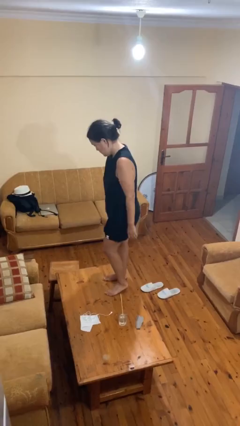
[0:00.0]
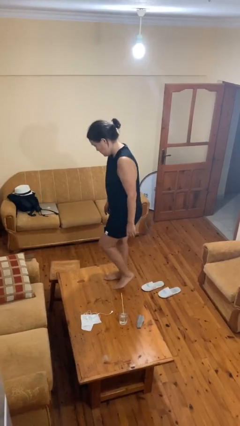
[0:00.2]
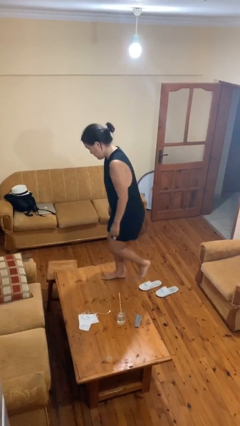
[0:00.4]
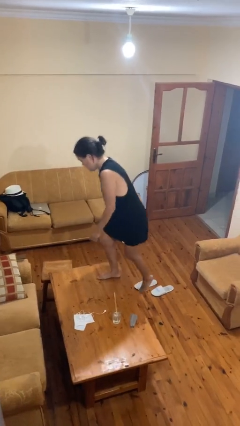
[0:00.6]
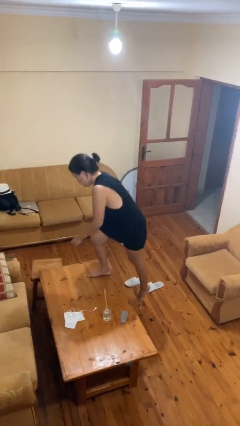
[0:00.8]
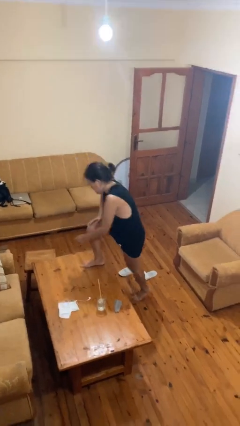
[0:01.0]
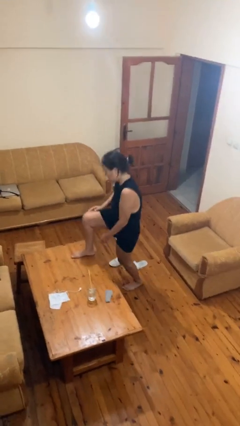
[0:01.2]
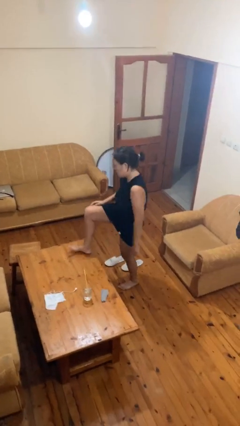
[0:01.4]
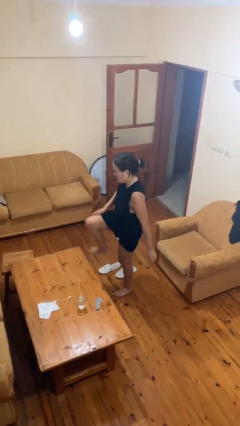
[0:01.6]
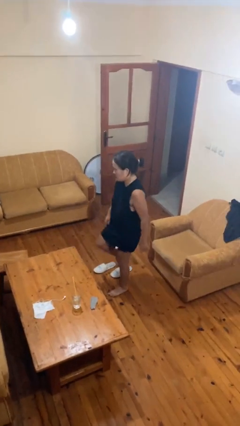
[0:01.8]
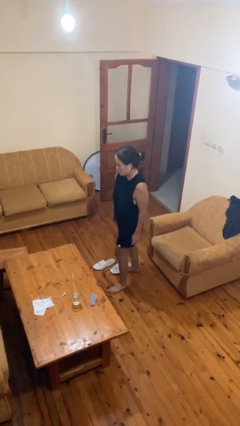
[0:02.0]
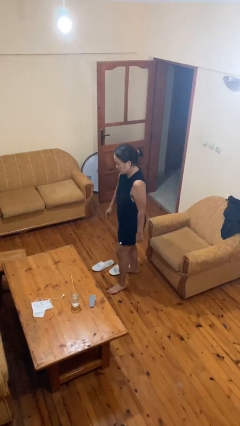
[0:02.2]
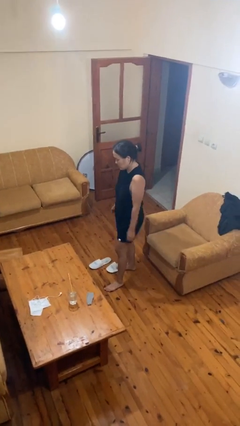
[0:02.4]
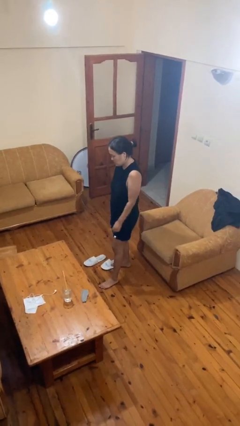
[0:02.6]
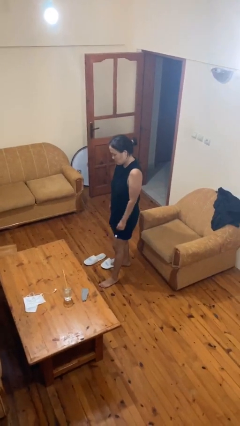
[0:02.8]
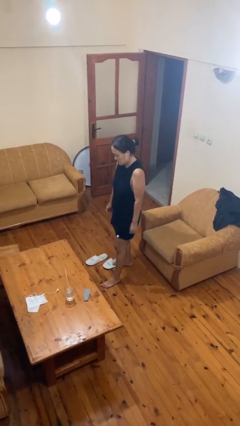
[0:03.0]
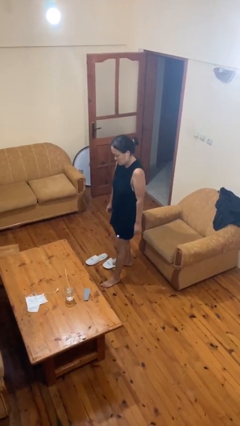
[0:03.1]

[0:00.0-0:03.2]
person climbs off table

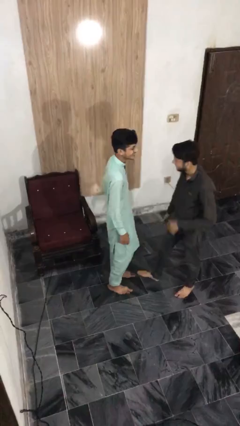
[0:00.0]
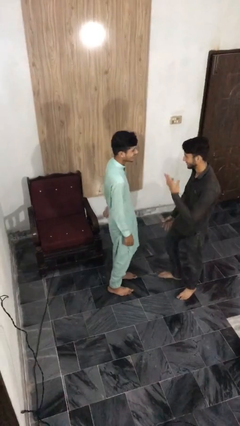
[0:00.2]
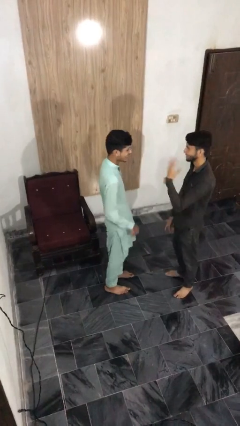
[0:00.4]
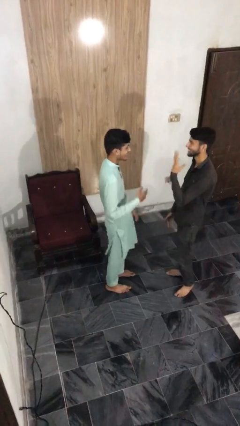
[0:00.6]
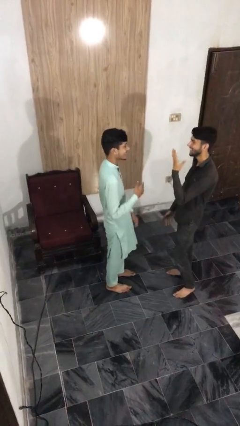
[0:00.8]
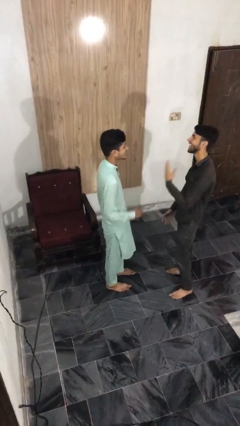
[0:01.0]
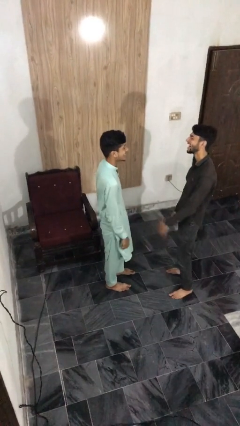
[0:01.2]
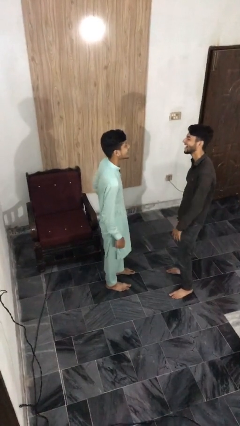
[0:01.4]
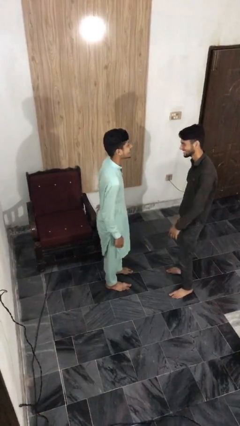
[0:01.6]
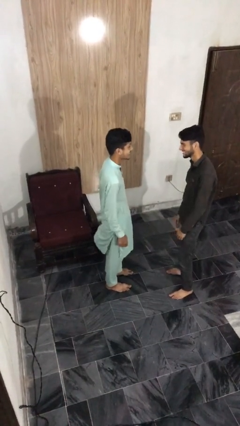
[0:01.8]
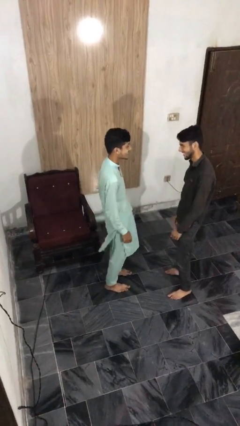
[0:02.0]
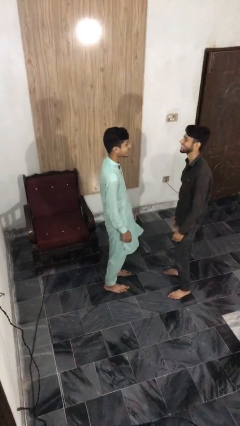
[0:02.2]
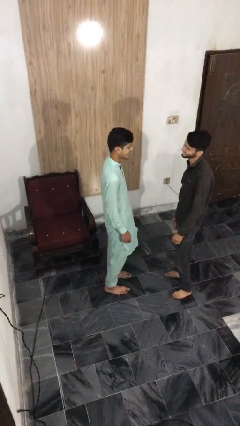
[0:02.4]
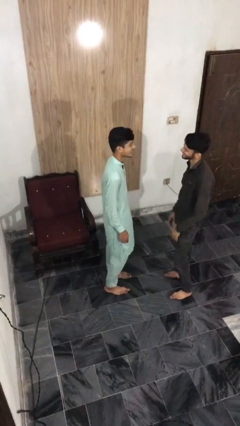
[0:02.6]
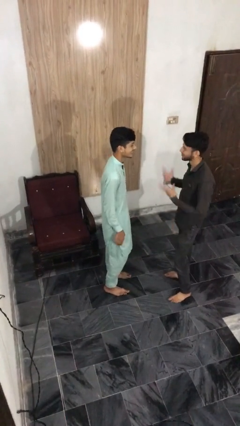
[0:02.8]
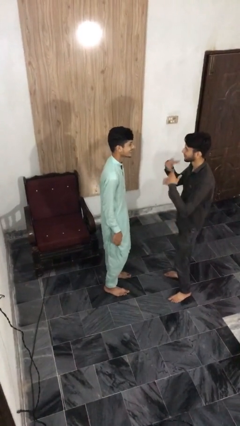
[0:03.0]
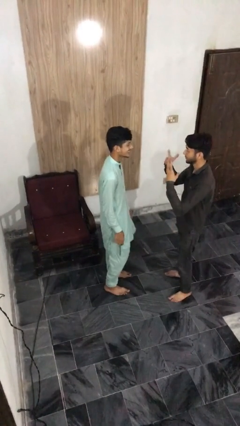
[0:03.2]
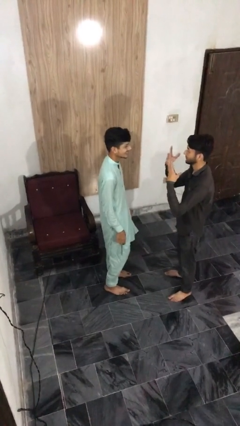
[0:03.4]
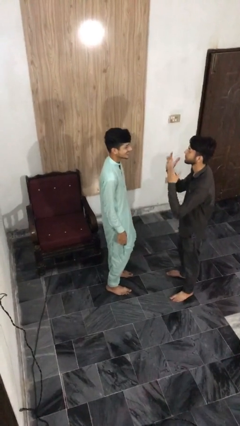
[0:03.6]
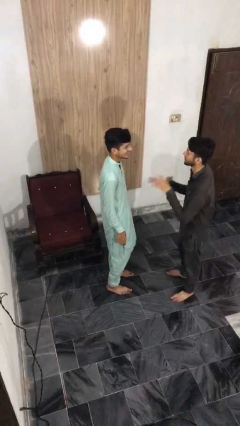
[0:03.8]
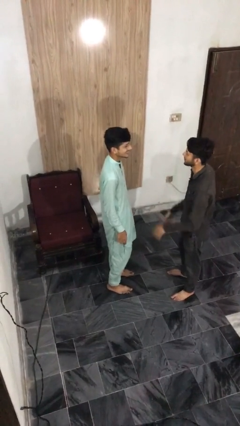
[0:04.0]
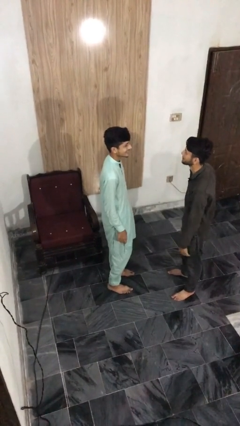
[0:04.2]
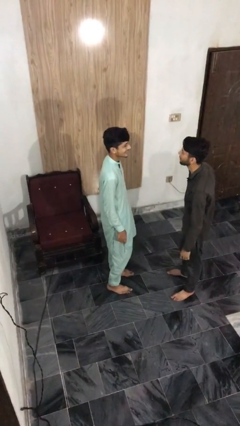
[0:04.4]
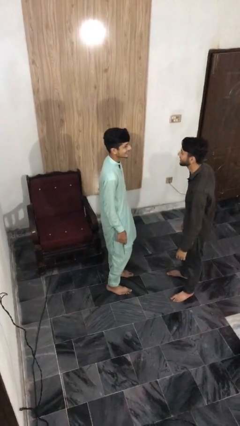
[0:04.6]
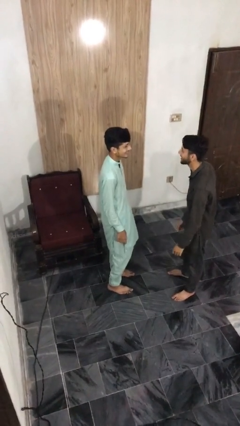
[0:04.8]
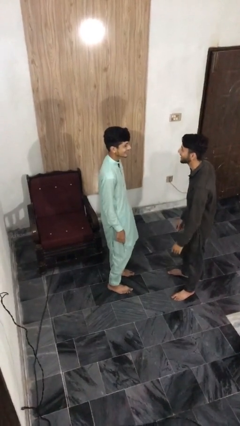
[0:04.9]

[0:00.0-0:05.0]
person talks to person

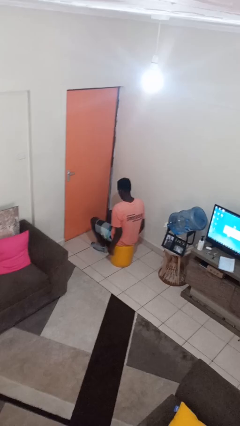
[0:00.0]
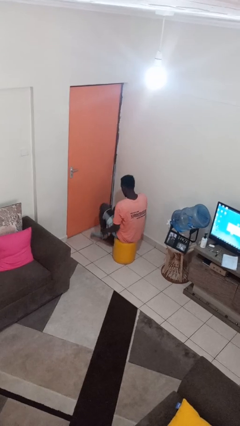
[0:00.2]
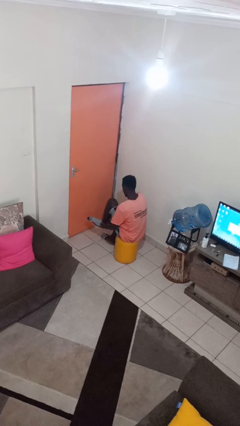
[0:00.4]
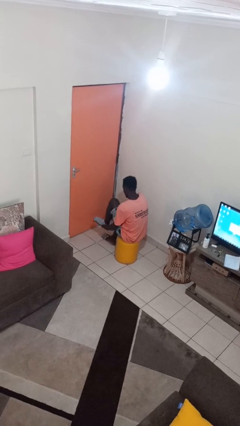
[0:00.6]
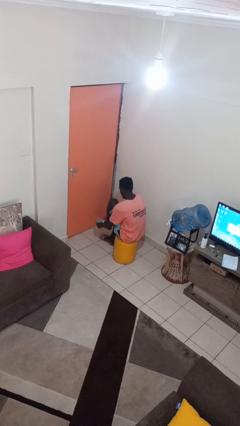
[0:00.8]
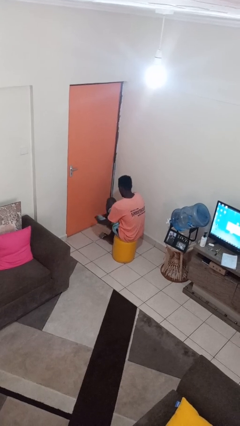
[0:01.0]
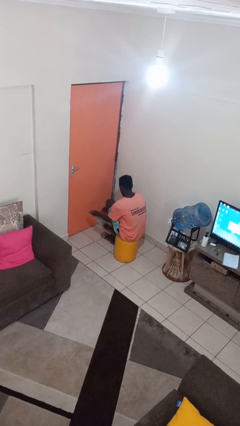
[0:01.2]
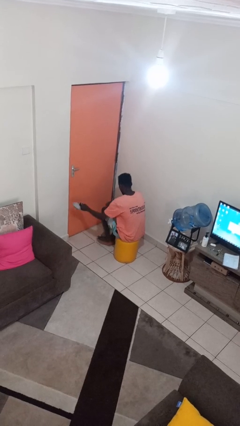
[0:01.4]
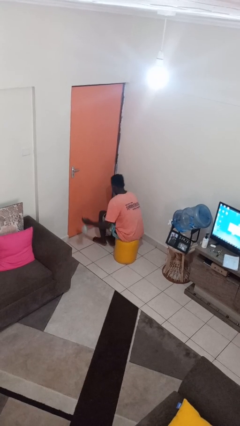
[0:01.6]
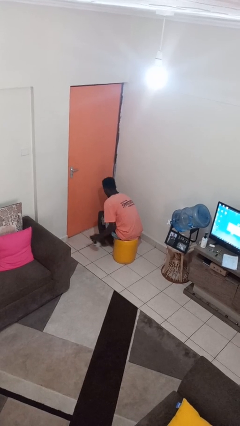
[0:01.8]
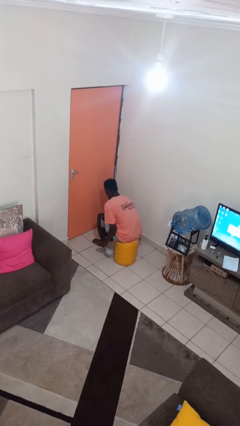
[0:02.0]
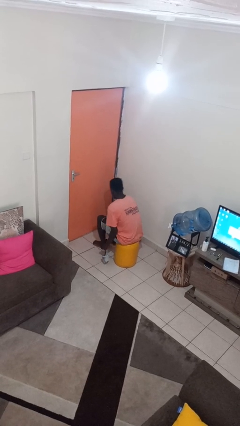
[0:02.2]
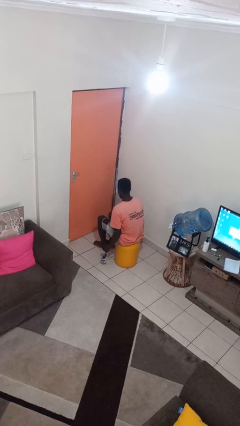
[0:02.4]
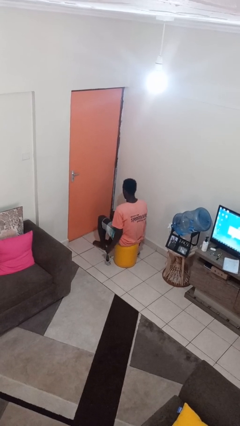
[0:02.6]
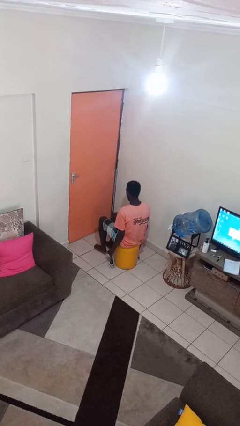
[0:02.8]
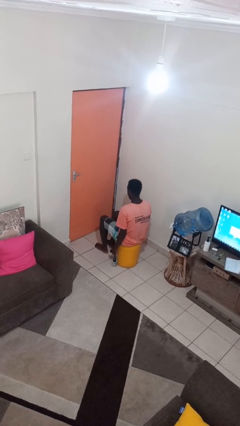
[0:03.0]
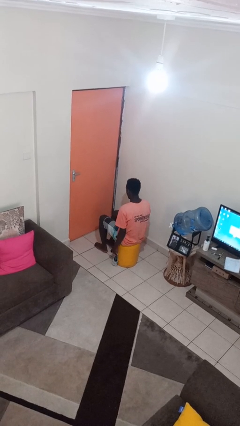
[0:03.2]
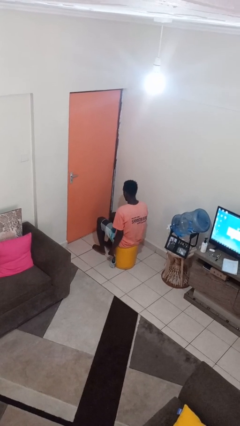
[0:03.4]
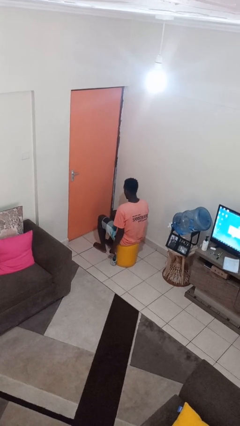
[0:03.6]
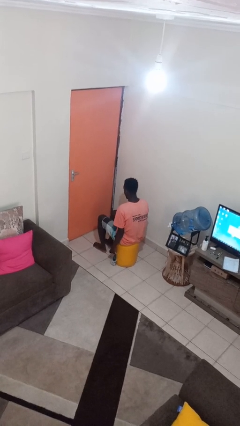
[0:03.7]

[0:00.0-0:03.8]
person takes off socks

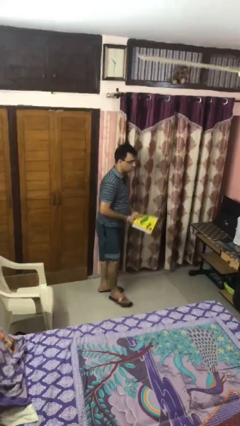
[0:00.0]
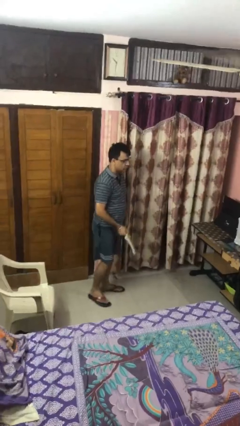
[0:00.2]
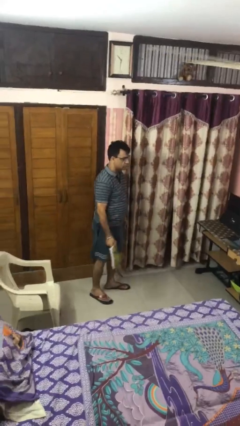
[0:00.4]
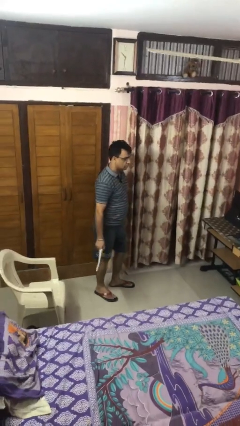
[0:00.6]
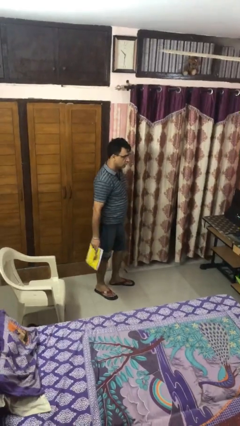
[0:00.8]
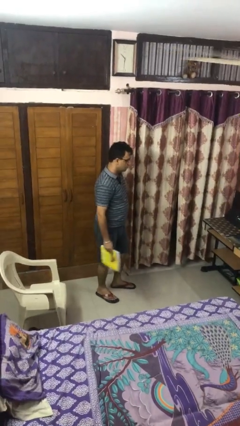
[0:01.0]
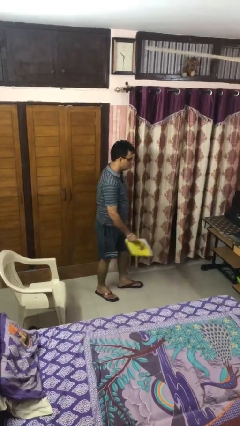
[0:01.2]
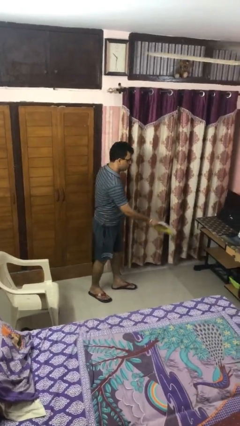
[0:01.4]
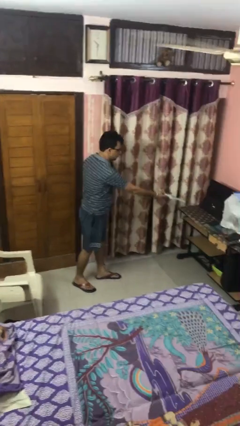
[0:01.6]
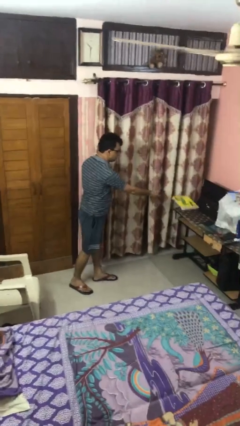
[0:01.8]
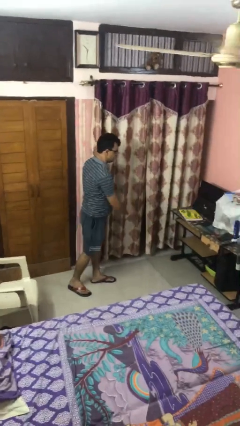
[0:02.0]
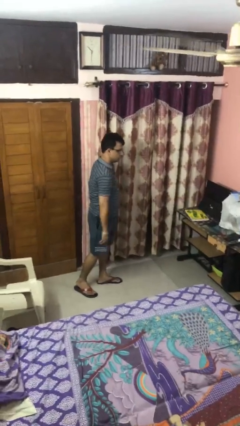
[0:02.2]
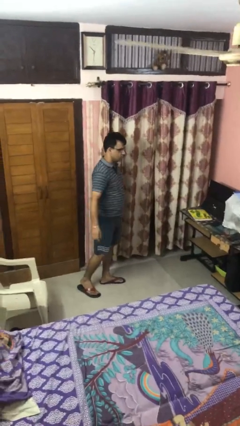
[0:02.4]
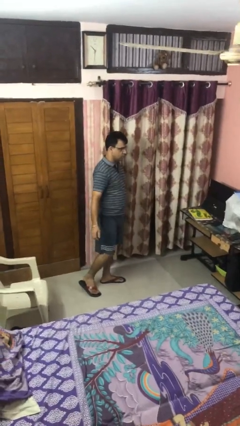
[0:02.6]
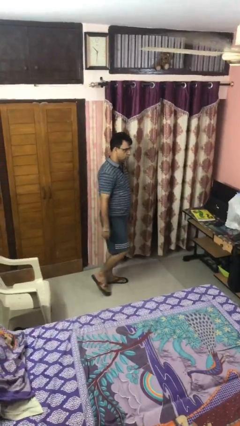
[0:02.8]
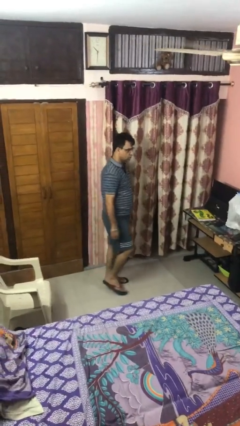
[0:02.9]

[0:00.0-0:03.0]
person throws object on table

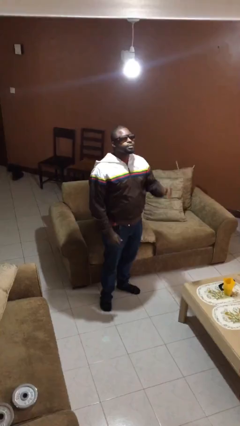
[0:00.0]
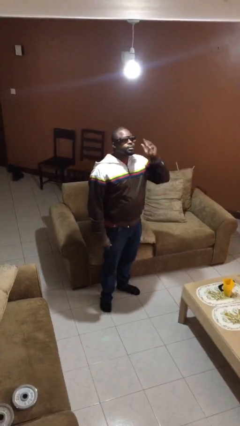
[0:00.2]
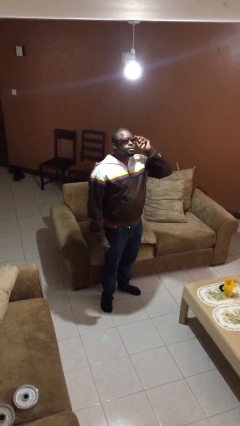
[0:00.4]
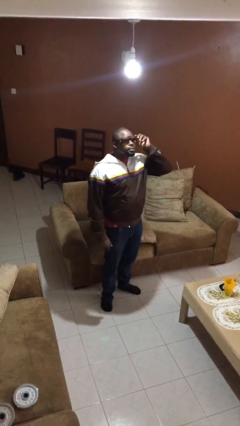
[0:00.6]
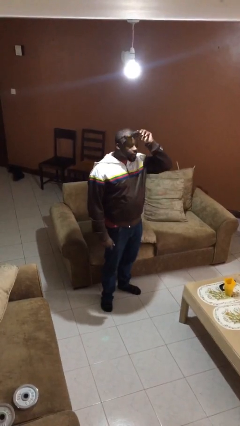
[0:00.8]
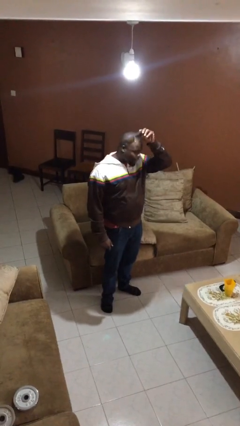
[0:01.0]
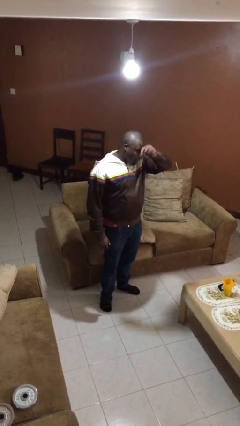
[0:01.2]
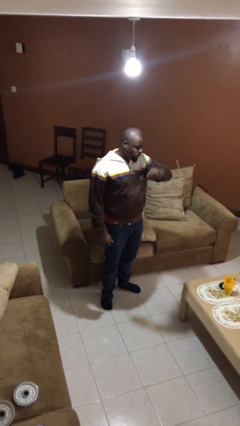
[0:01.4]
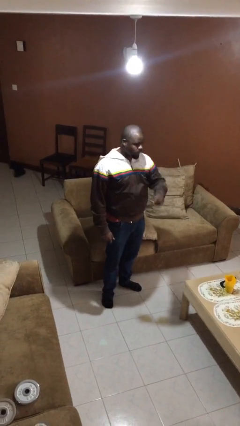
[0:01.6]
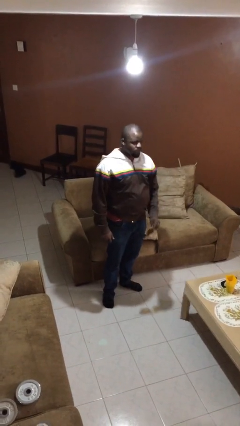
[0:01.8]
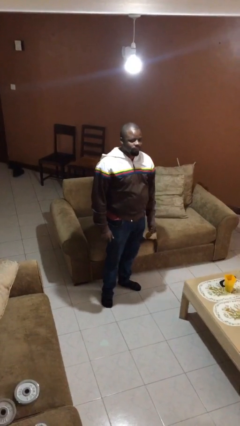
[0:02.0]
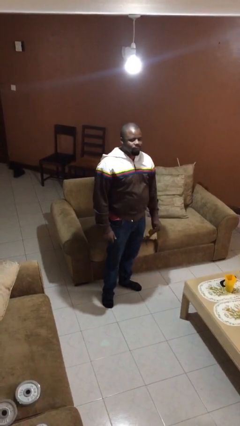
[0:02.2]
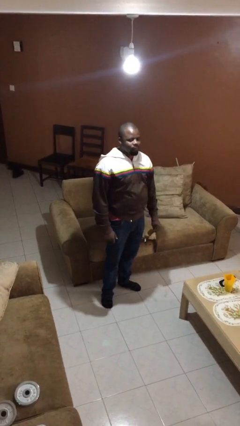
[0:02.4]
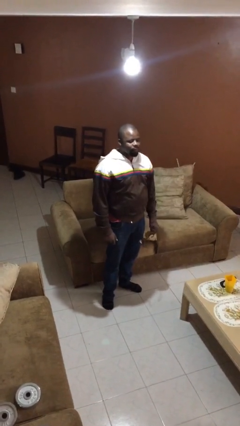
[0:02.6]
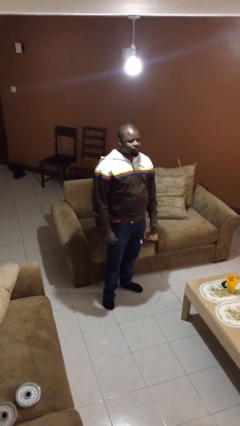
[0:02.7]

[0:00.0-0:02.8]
person takes off sunglasses
